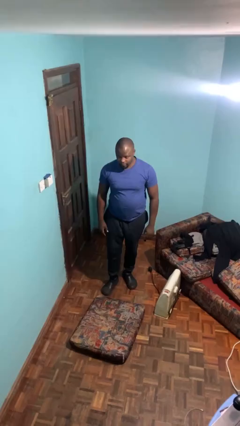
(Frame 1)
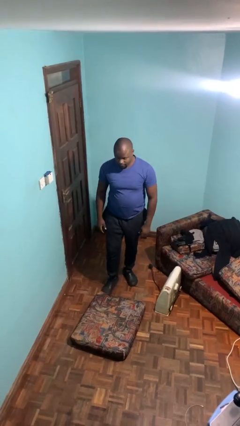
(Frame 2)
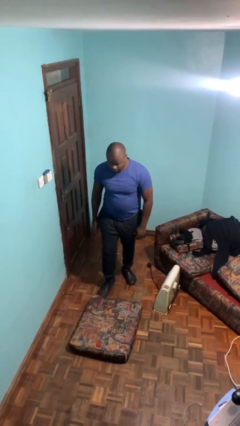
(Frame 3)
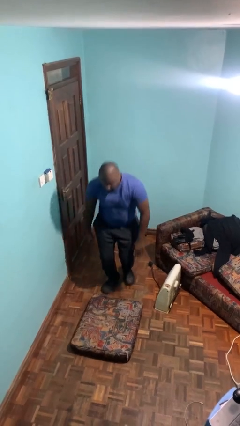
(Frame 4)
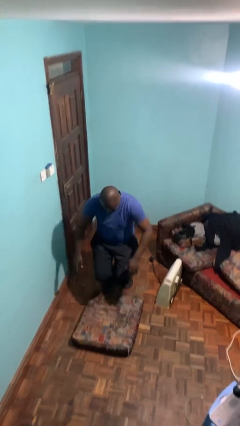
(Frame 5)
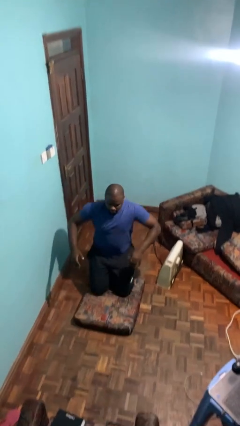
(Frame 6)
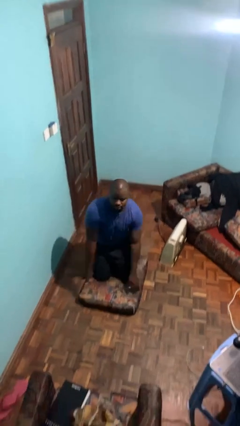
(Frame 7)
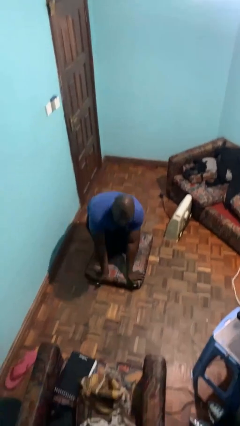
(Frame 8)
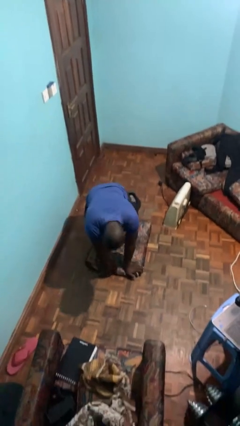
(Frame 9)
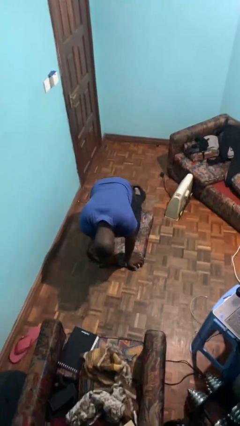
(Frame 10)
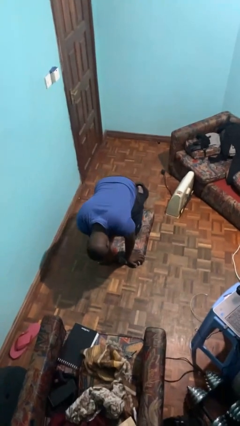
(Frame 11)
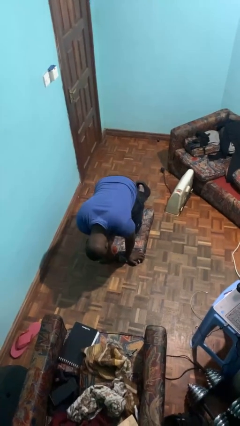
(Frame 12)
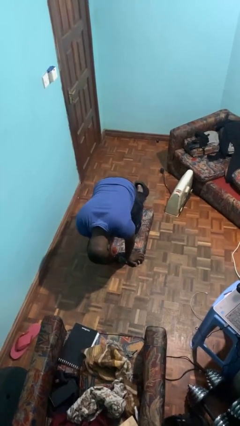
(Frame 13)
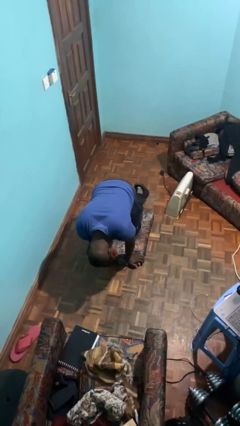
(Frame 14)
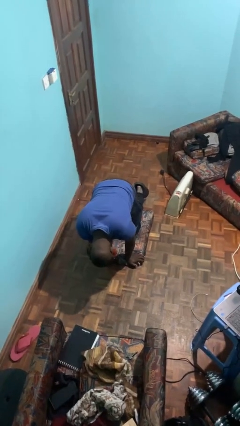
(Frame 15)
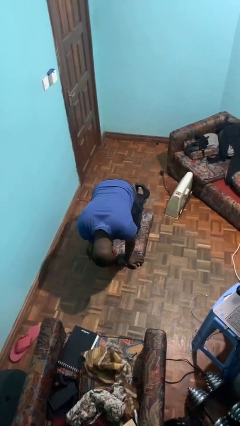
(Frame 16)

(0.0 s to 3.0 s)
person trips on object on floor

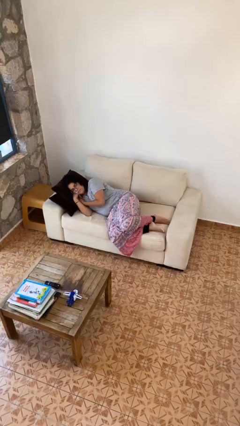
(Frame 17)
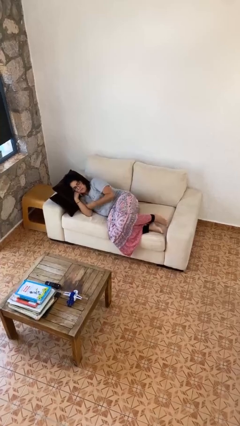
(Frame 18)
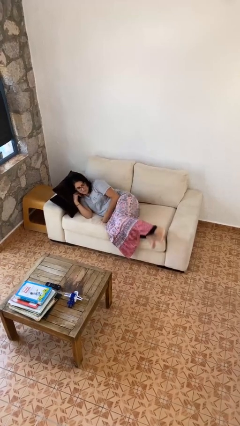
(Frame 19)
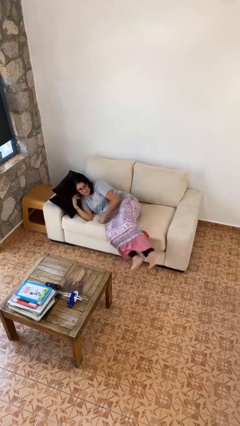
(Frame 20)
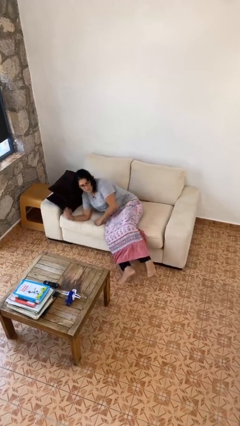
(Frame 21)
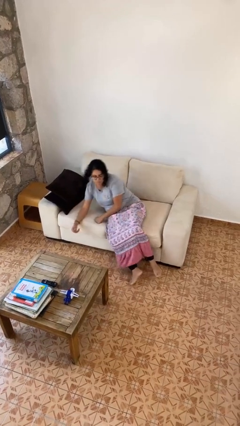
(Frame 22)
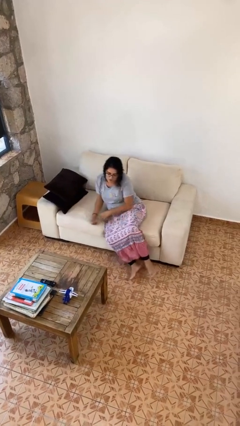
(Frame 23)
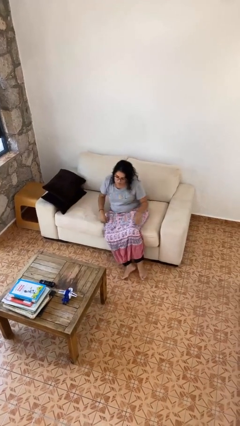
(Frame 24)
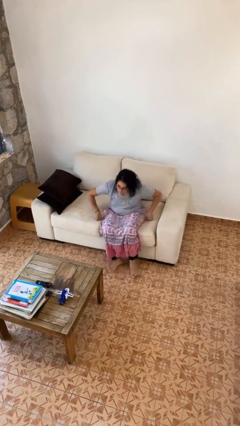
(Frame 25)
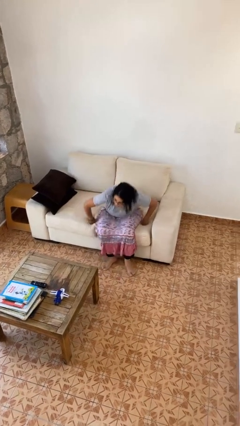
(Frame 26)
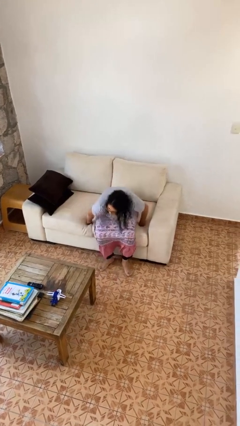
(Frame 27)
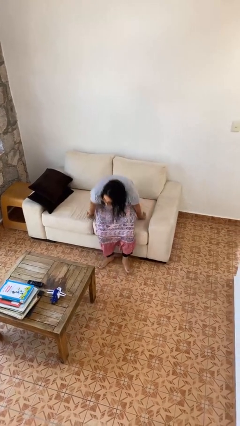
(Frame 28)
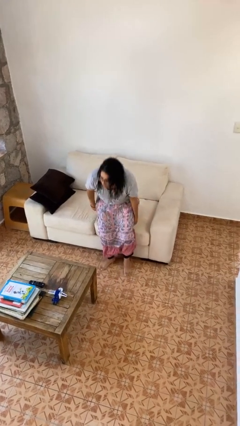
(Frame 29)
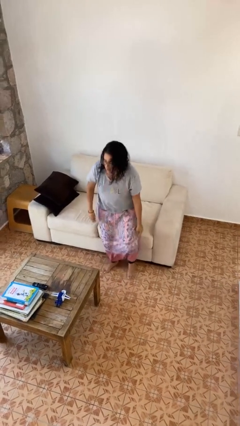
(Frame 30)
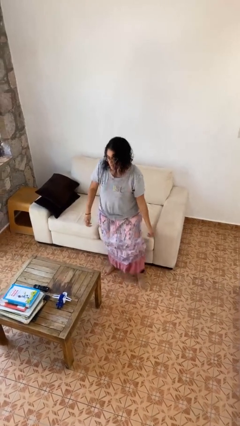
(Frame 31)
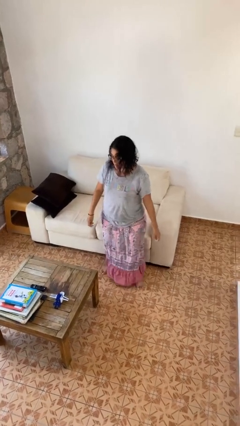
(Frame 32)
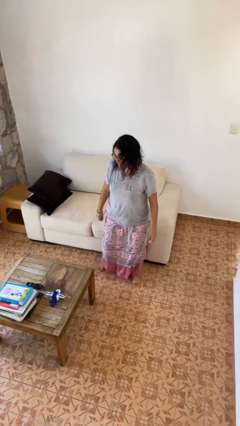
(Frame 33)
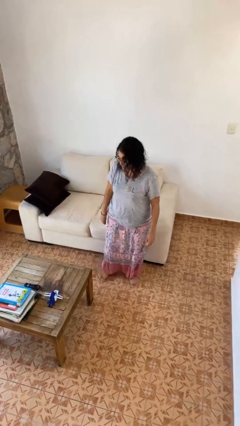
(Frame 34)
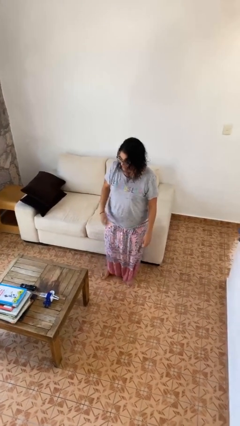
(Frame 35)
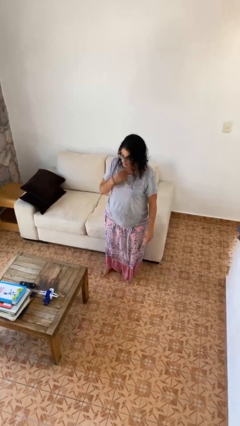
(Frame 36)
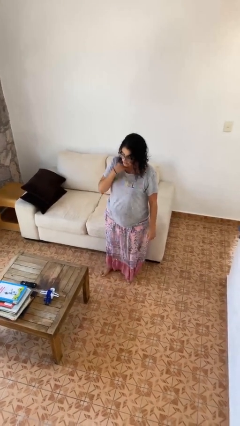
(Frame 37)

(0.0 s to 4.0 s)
person stands up

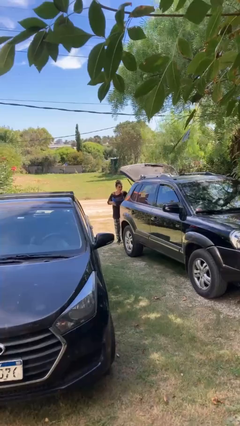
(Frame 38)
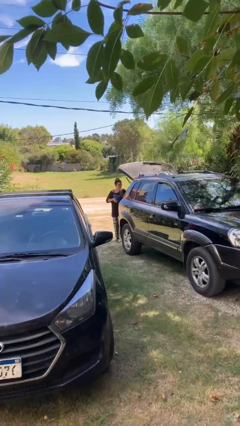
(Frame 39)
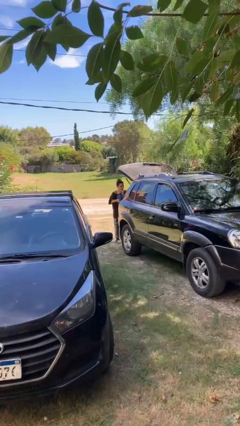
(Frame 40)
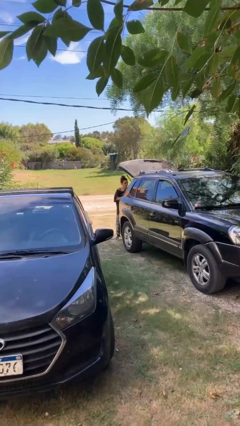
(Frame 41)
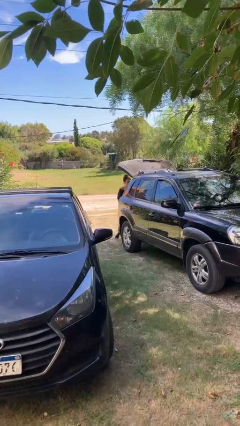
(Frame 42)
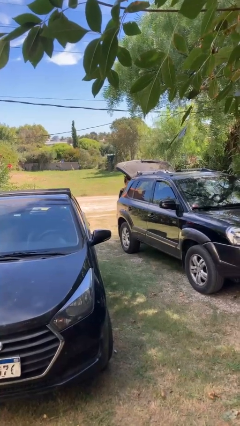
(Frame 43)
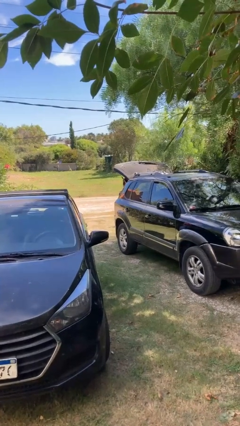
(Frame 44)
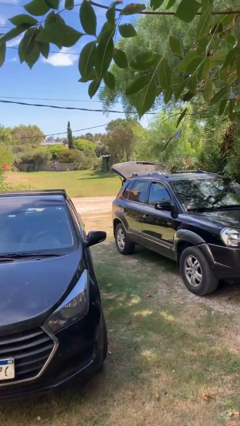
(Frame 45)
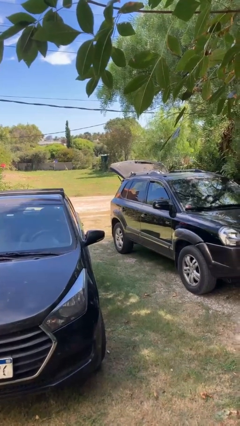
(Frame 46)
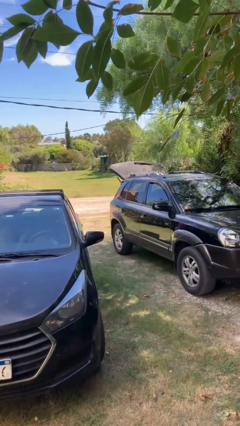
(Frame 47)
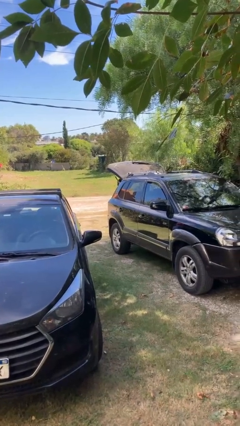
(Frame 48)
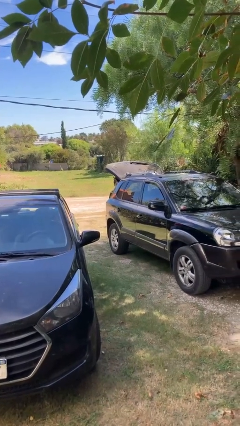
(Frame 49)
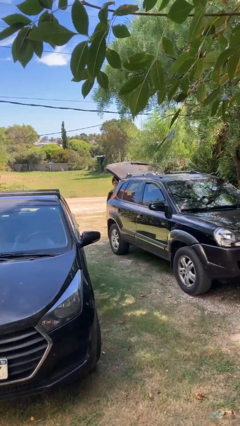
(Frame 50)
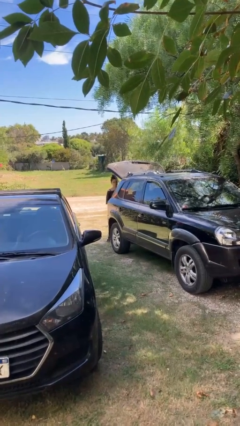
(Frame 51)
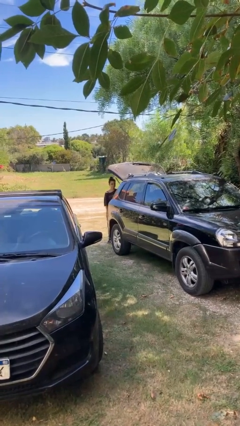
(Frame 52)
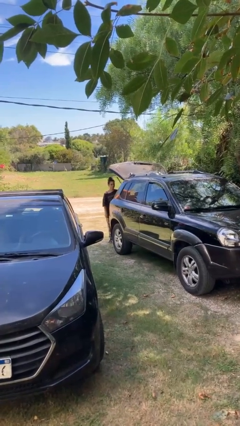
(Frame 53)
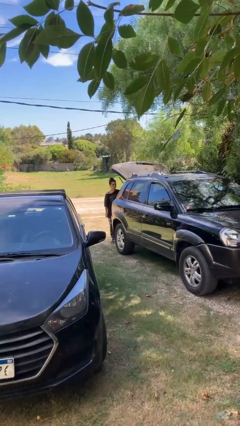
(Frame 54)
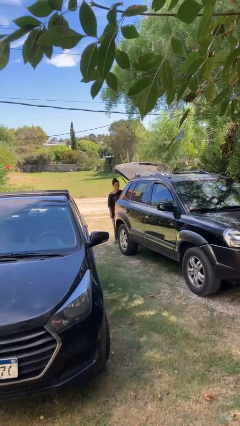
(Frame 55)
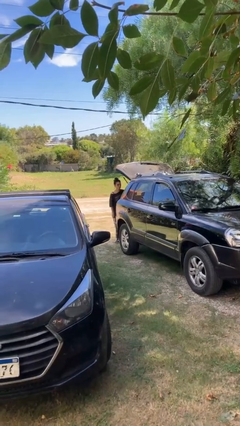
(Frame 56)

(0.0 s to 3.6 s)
person loads car

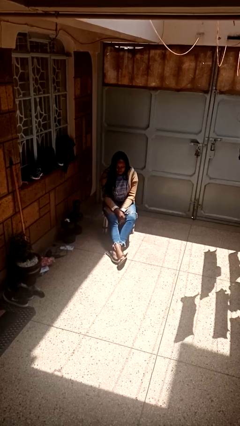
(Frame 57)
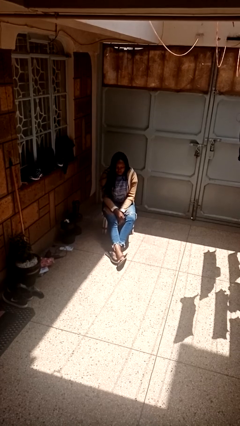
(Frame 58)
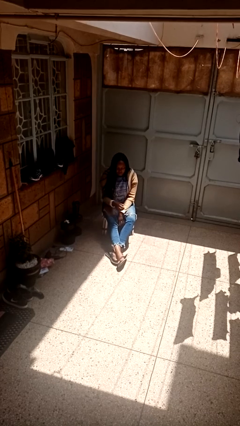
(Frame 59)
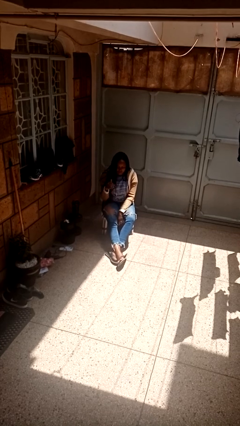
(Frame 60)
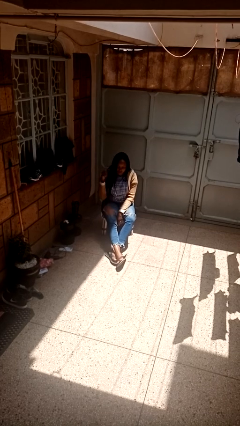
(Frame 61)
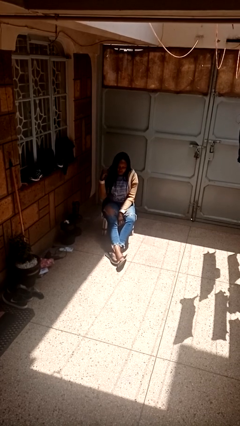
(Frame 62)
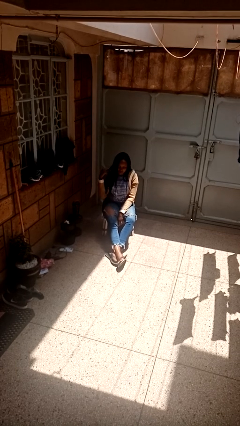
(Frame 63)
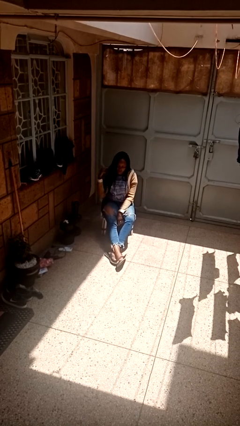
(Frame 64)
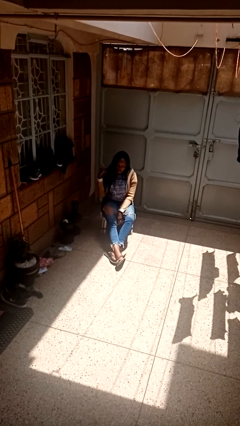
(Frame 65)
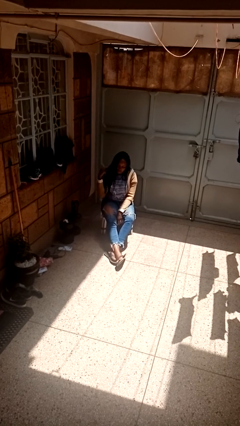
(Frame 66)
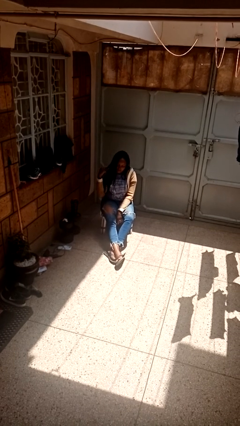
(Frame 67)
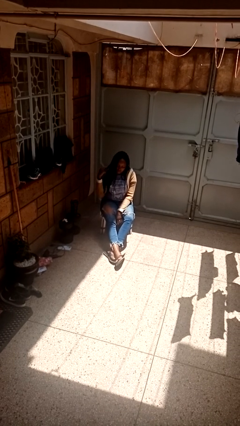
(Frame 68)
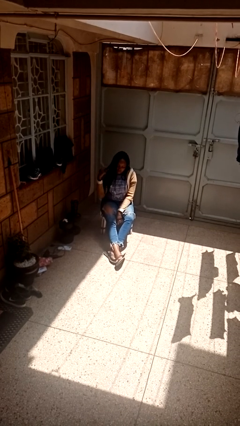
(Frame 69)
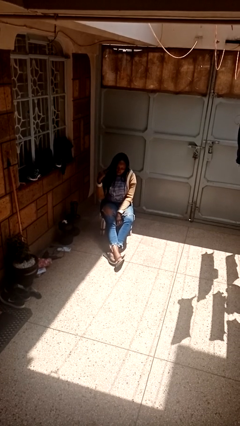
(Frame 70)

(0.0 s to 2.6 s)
person gestures behind me

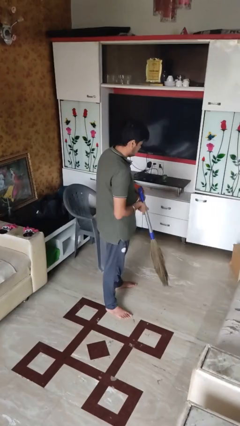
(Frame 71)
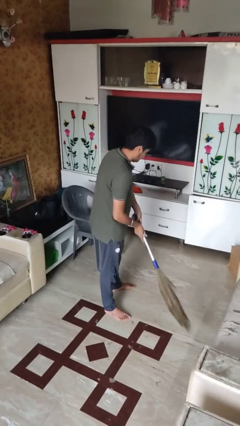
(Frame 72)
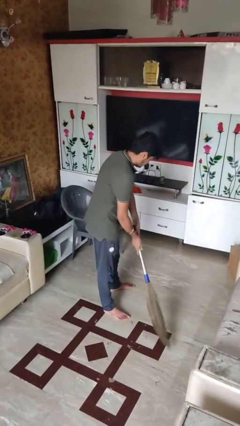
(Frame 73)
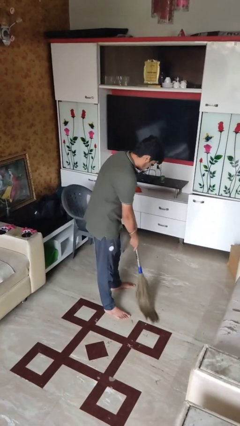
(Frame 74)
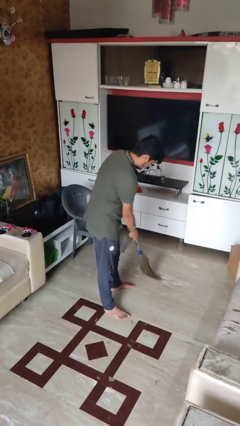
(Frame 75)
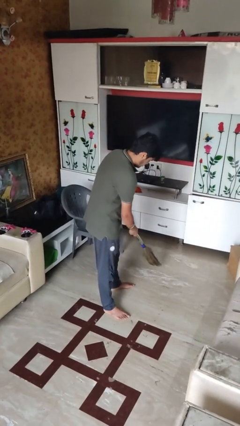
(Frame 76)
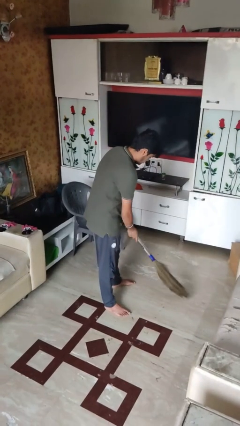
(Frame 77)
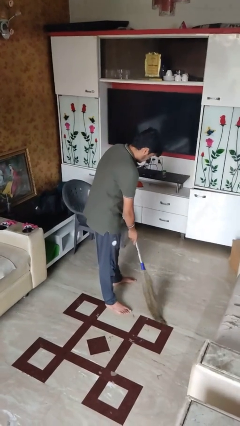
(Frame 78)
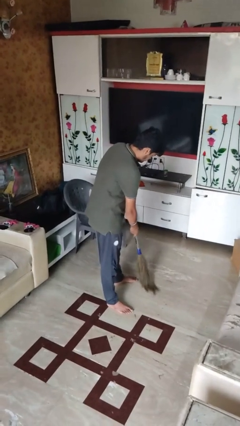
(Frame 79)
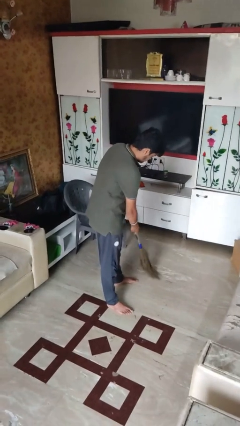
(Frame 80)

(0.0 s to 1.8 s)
person sweeps floor

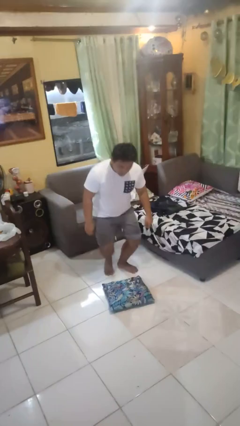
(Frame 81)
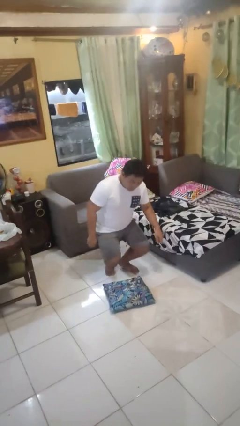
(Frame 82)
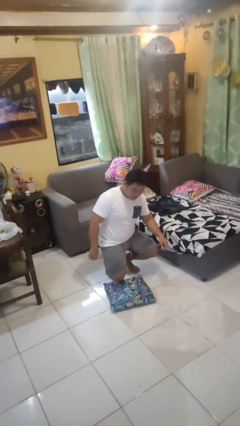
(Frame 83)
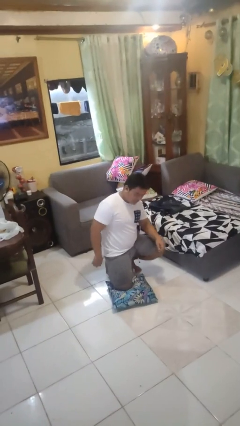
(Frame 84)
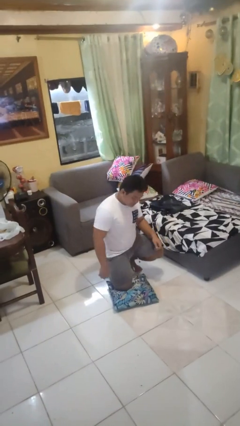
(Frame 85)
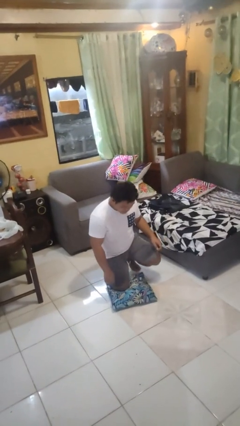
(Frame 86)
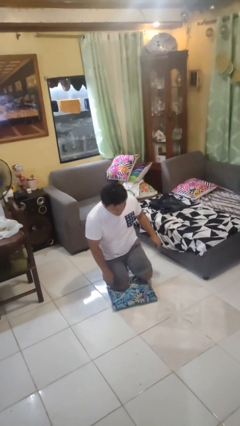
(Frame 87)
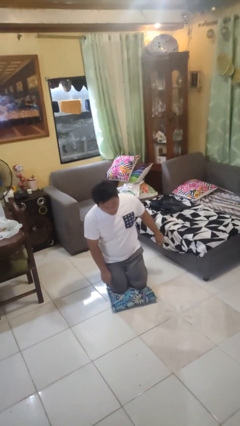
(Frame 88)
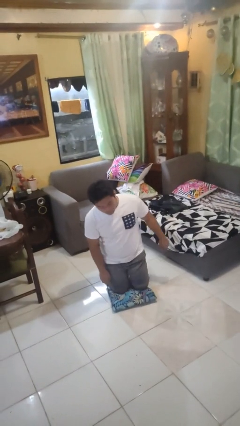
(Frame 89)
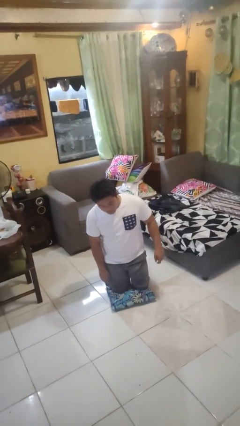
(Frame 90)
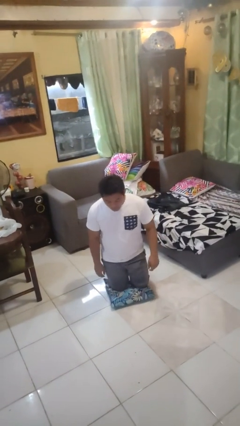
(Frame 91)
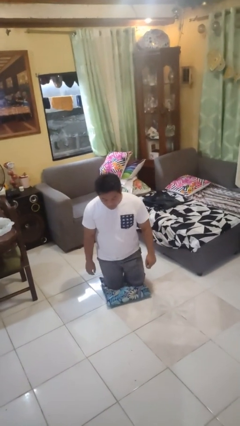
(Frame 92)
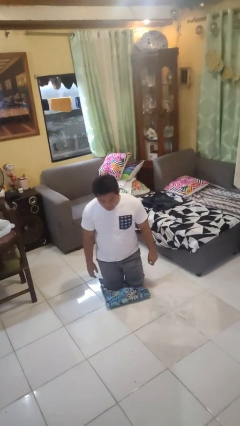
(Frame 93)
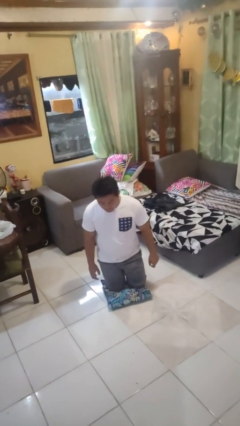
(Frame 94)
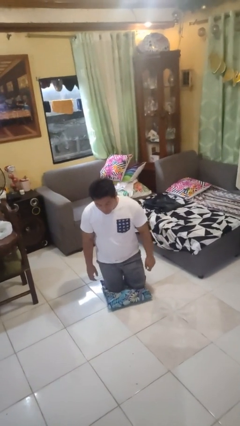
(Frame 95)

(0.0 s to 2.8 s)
person kneels
